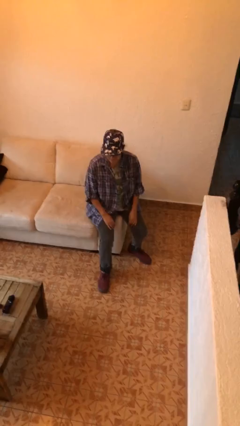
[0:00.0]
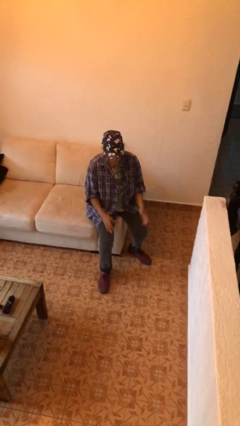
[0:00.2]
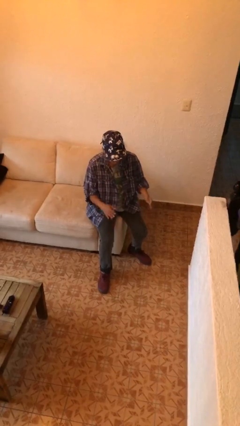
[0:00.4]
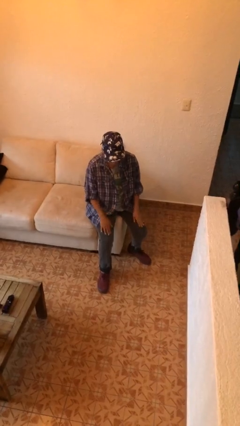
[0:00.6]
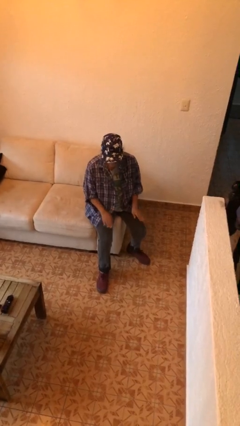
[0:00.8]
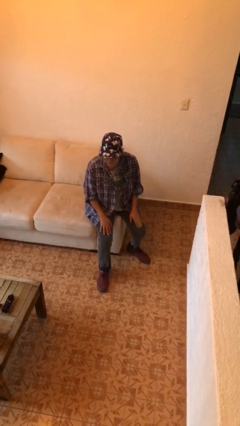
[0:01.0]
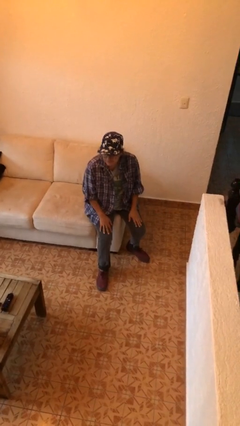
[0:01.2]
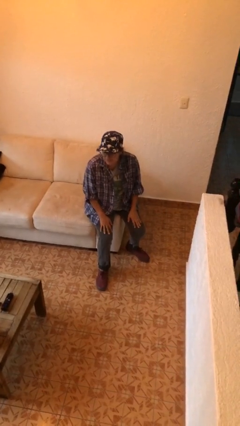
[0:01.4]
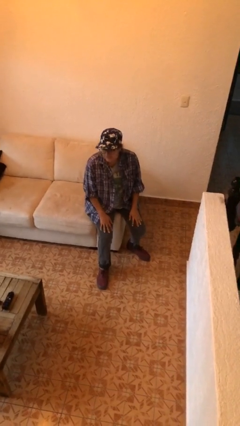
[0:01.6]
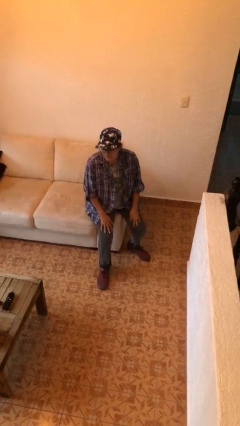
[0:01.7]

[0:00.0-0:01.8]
person slaps hands on thighs

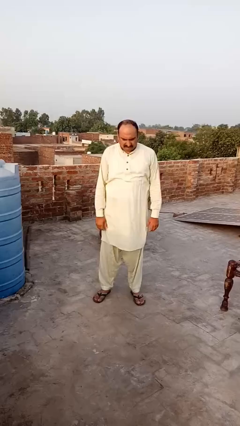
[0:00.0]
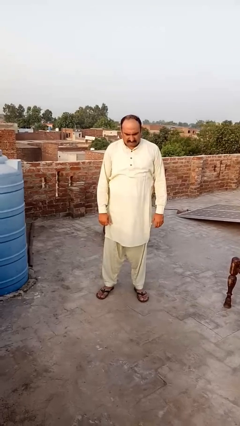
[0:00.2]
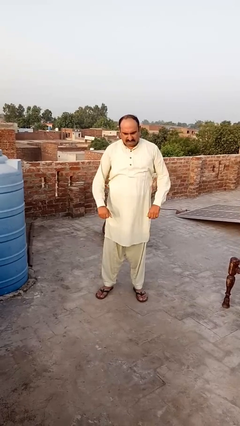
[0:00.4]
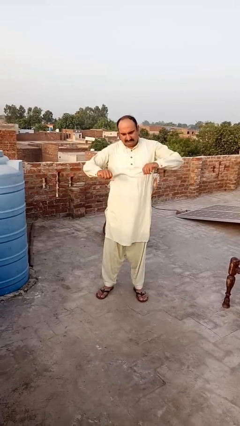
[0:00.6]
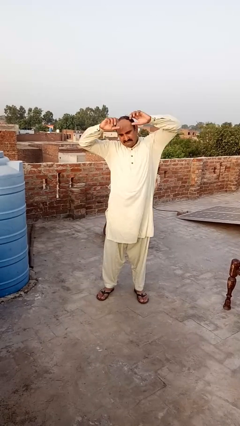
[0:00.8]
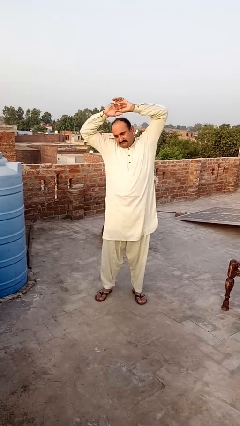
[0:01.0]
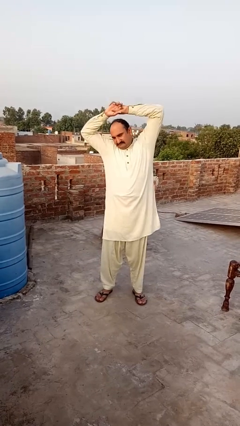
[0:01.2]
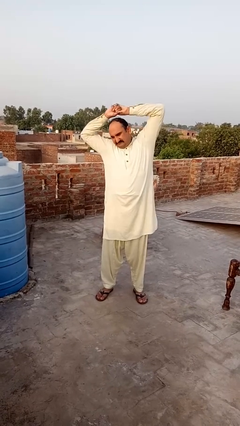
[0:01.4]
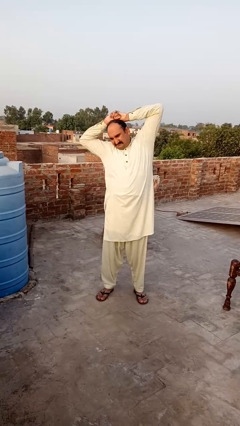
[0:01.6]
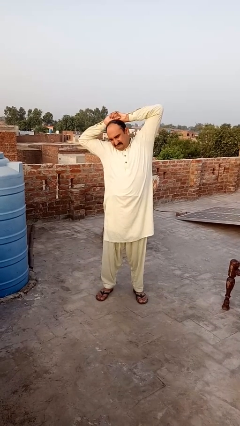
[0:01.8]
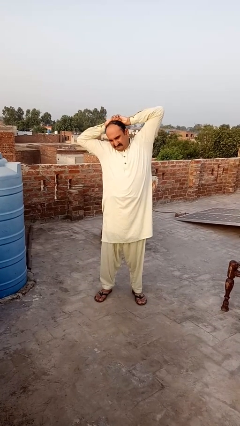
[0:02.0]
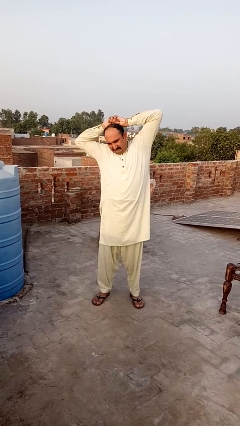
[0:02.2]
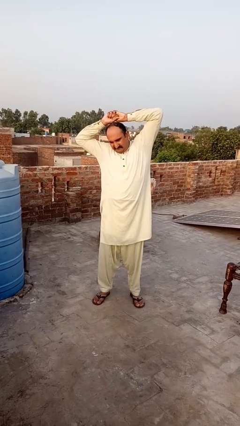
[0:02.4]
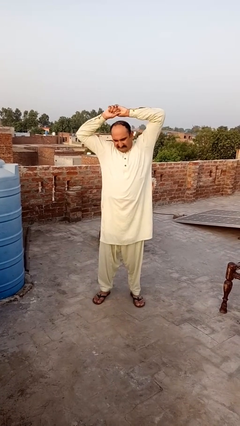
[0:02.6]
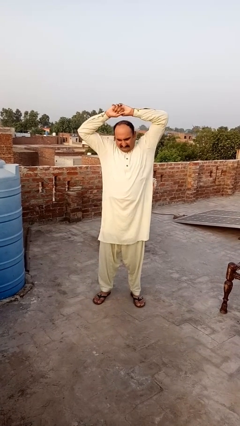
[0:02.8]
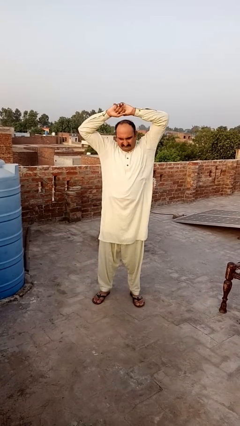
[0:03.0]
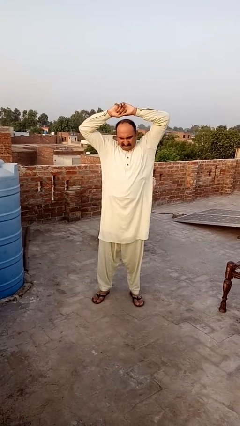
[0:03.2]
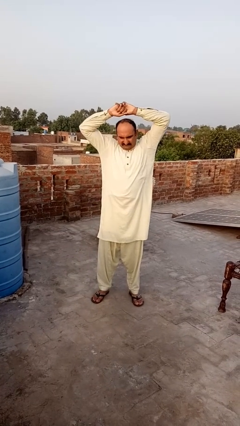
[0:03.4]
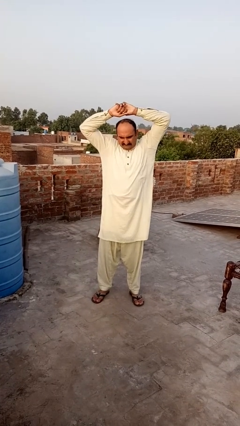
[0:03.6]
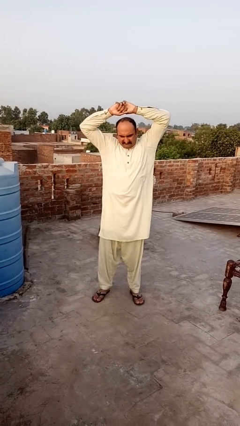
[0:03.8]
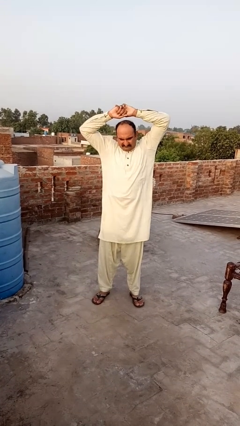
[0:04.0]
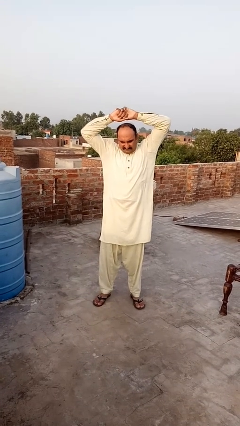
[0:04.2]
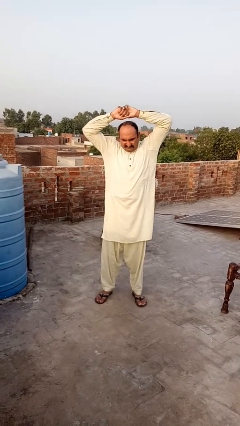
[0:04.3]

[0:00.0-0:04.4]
person stretches arms to side

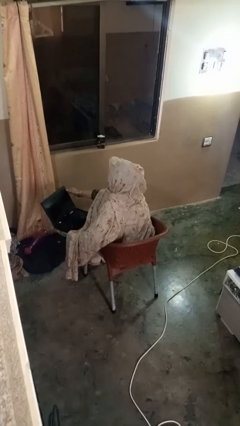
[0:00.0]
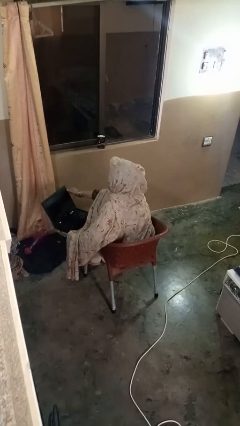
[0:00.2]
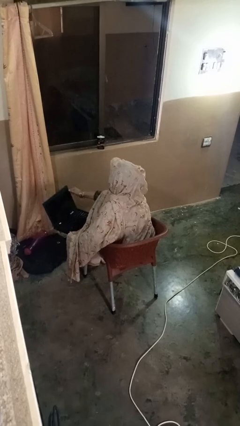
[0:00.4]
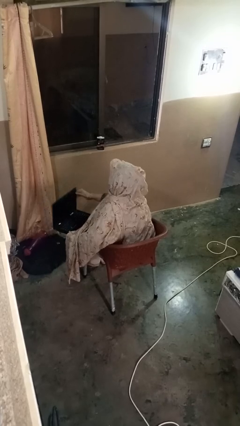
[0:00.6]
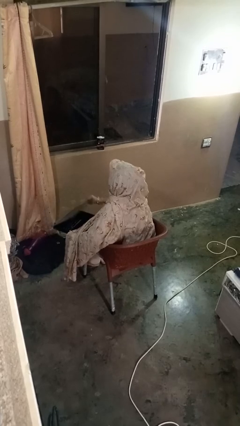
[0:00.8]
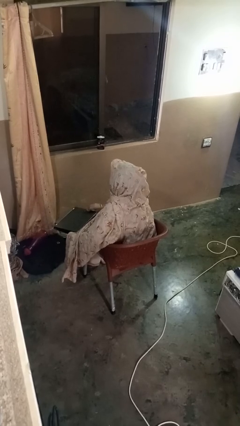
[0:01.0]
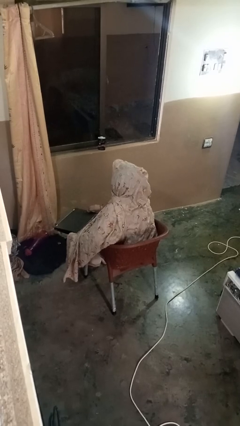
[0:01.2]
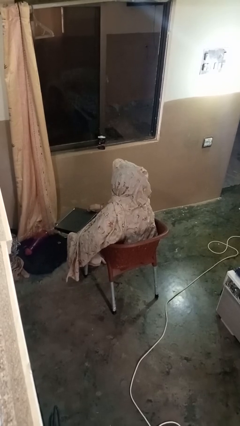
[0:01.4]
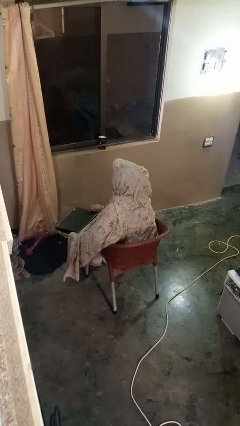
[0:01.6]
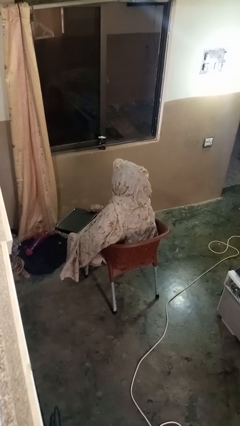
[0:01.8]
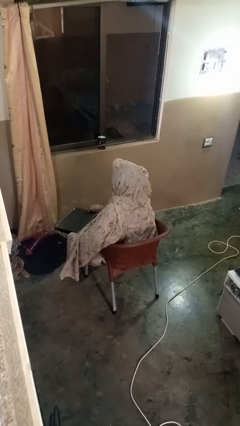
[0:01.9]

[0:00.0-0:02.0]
person closes laptop

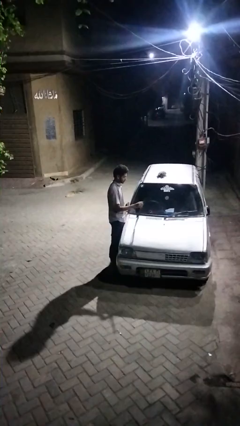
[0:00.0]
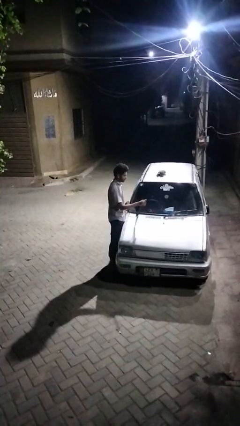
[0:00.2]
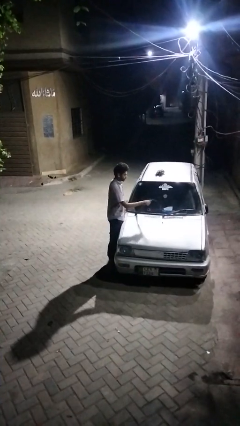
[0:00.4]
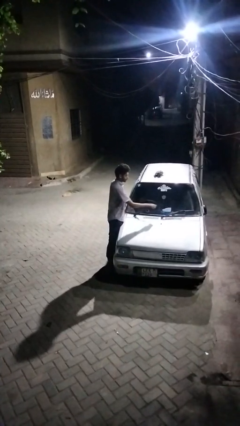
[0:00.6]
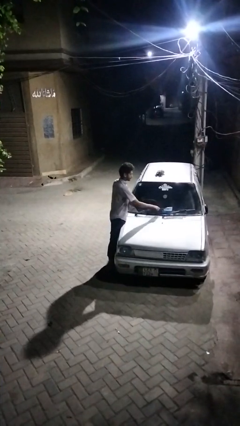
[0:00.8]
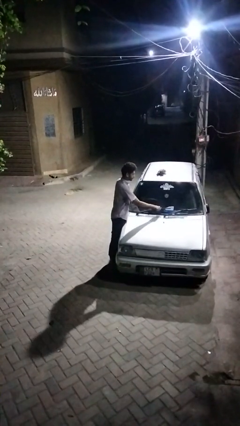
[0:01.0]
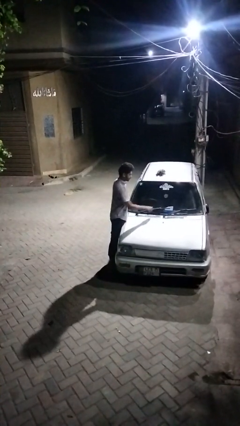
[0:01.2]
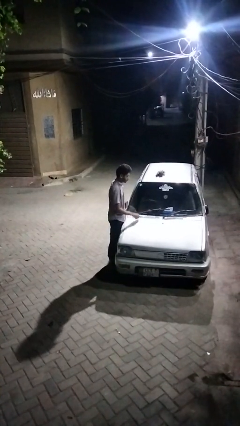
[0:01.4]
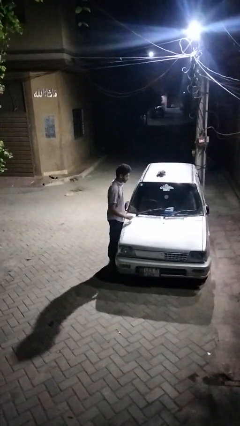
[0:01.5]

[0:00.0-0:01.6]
person flips down car wipers

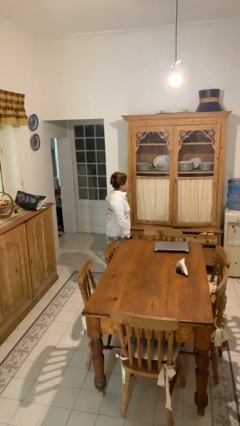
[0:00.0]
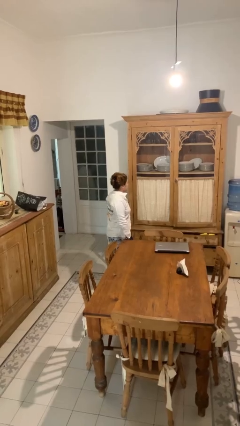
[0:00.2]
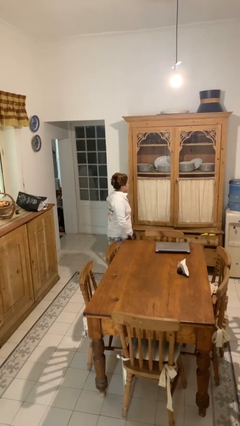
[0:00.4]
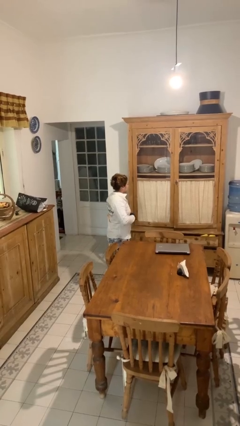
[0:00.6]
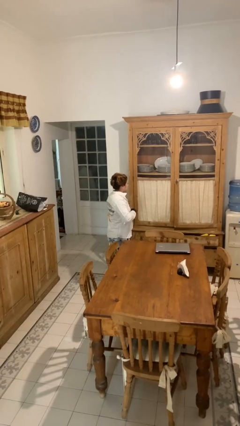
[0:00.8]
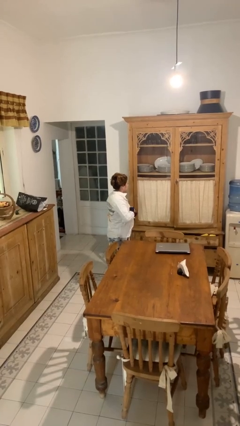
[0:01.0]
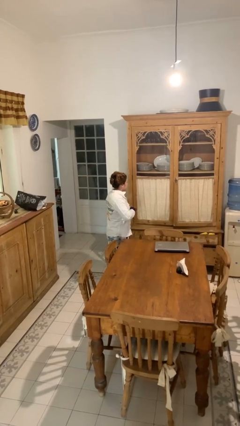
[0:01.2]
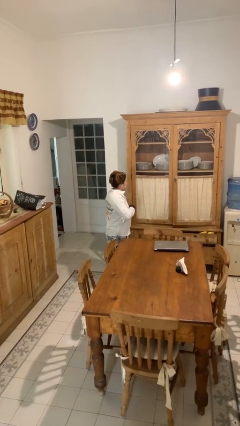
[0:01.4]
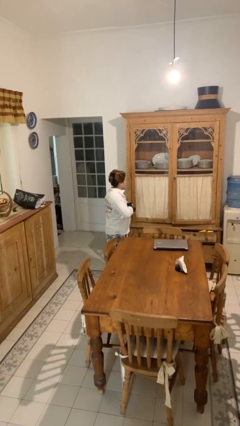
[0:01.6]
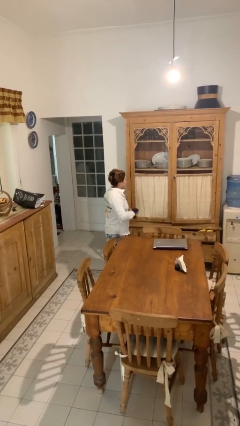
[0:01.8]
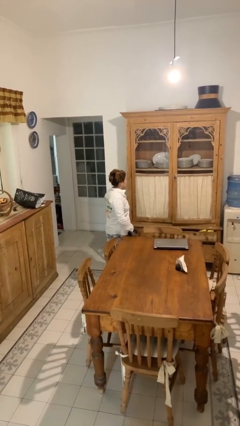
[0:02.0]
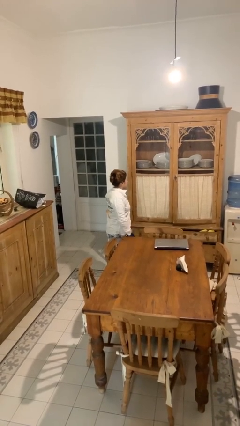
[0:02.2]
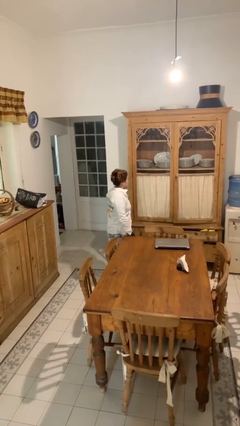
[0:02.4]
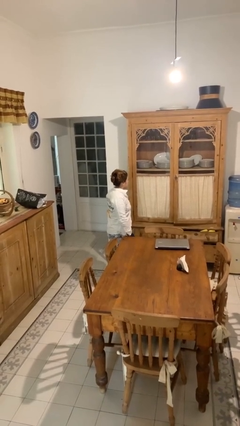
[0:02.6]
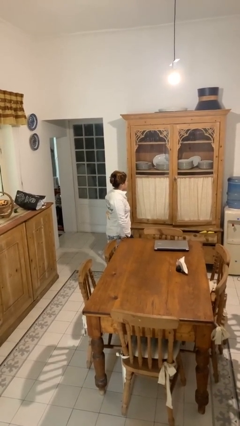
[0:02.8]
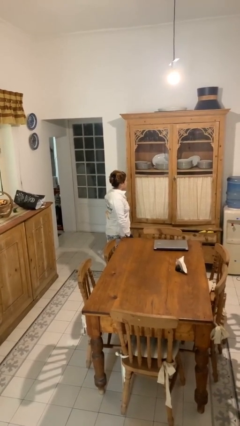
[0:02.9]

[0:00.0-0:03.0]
person unbuttons shirt

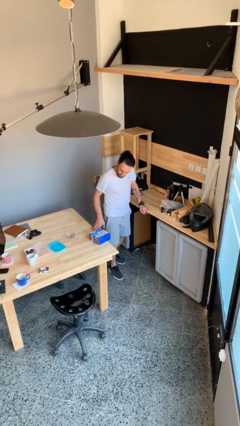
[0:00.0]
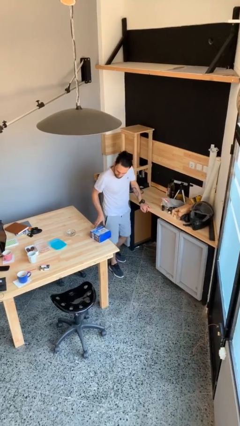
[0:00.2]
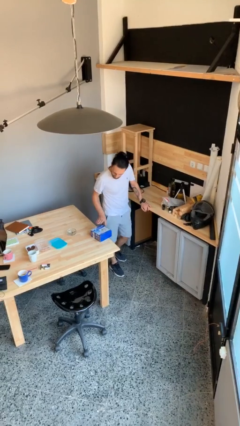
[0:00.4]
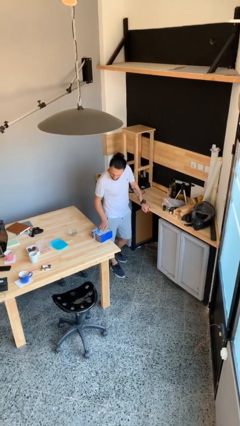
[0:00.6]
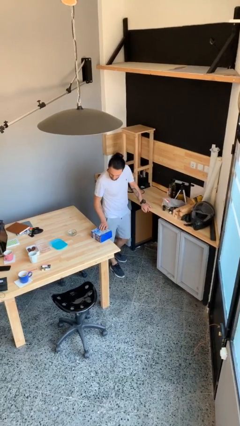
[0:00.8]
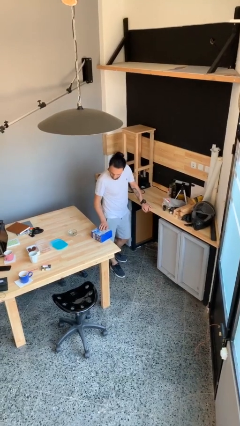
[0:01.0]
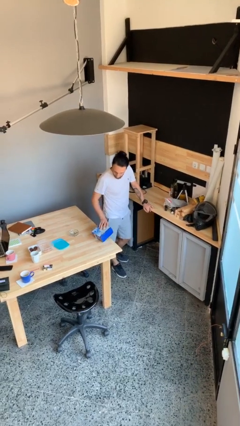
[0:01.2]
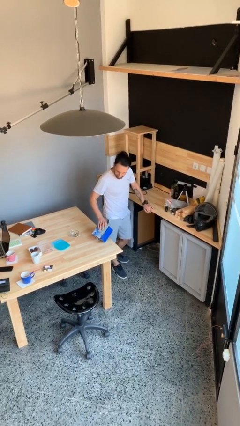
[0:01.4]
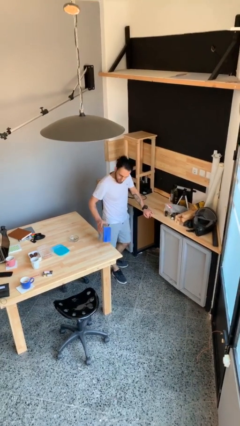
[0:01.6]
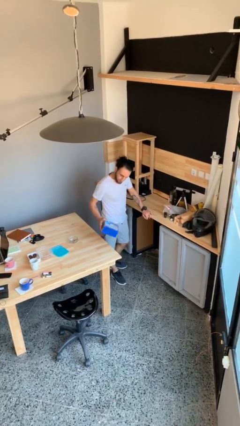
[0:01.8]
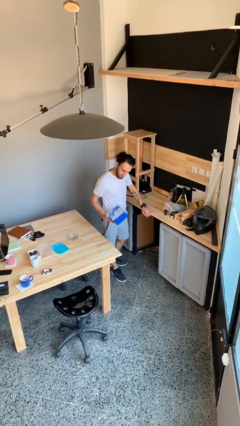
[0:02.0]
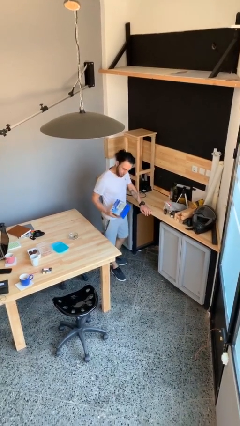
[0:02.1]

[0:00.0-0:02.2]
person picks up object from table

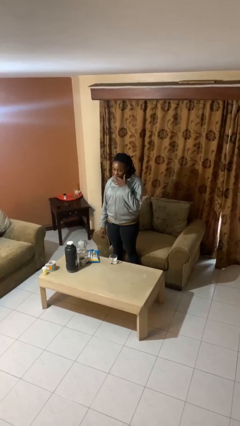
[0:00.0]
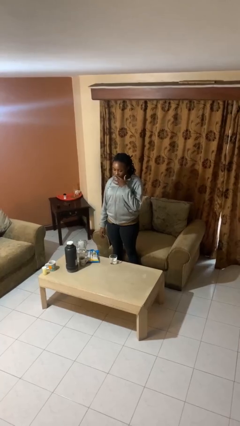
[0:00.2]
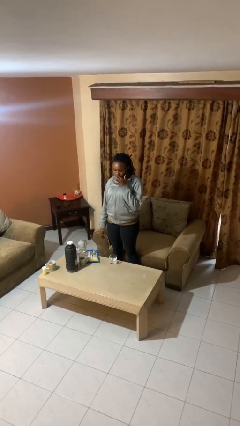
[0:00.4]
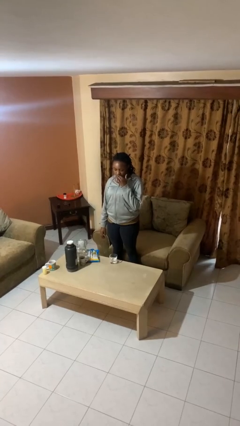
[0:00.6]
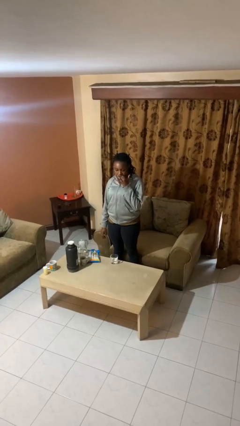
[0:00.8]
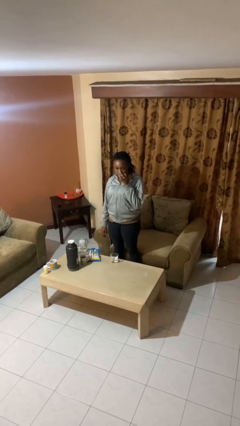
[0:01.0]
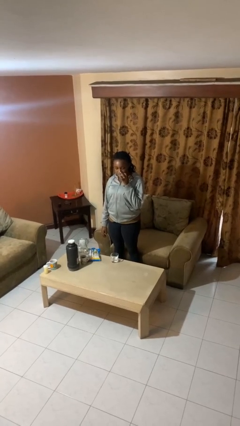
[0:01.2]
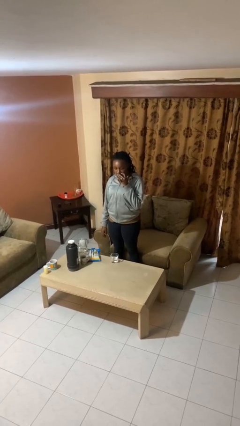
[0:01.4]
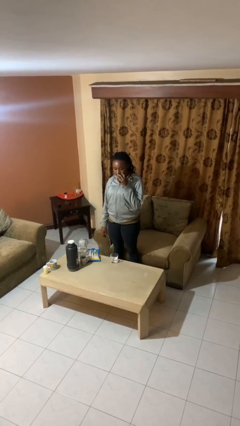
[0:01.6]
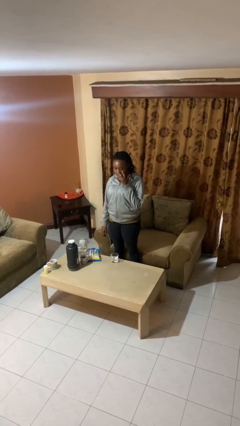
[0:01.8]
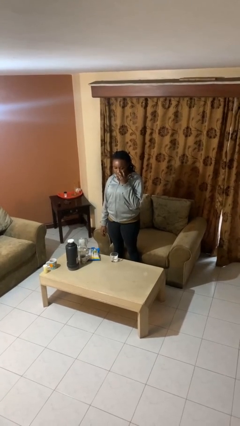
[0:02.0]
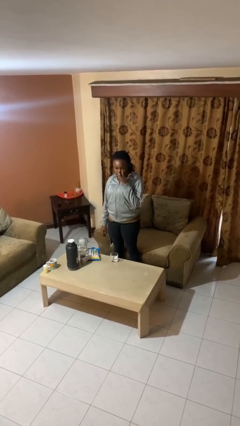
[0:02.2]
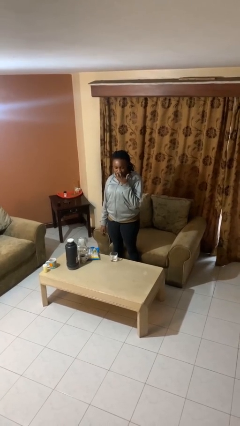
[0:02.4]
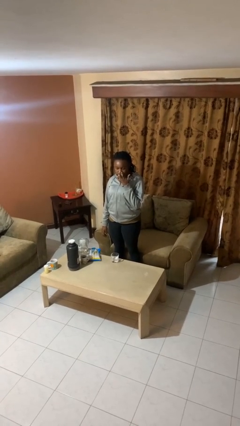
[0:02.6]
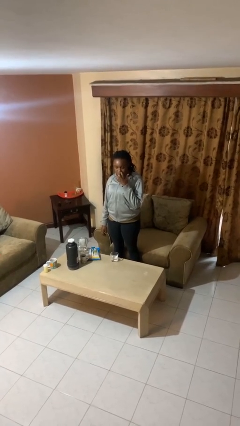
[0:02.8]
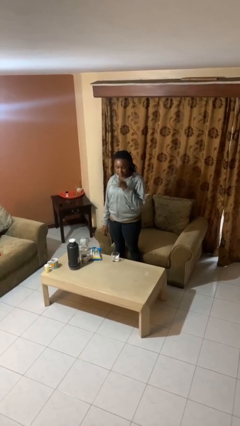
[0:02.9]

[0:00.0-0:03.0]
person licks fingers
